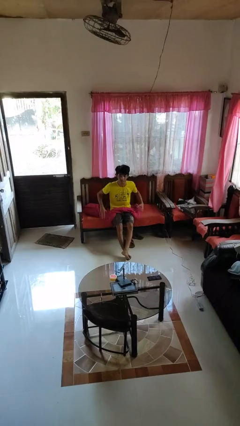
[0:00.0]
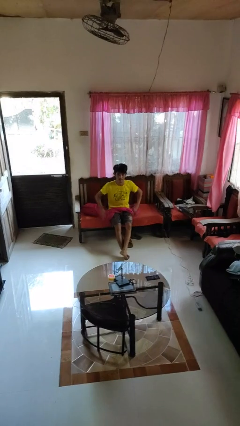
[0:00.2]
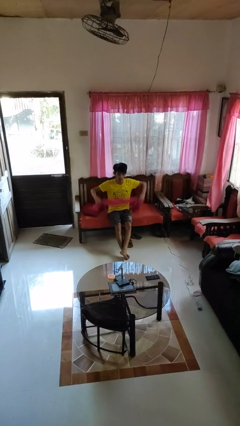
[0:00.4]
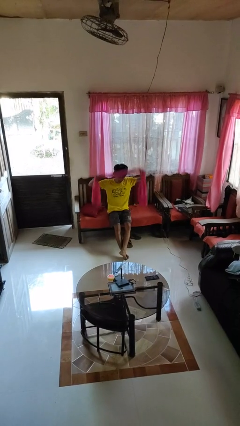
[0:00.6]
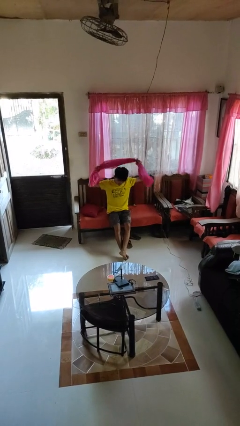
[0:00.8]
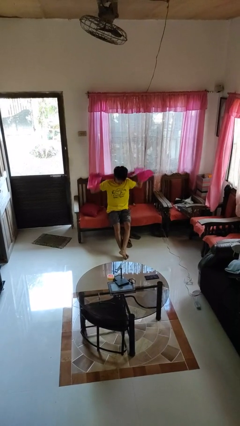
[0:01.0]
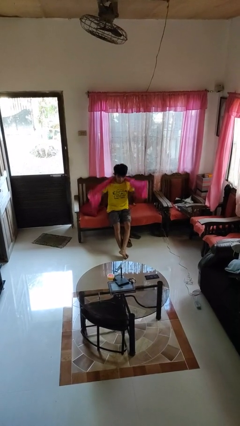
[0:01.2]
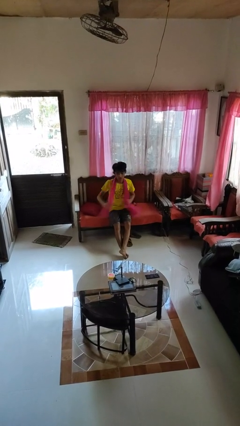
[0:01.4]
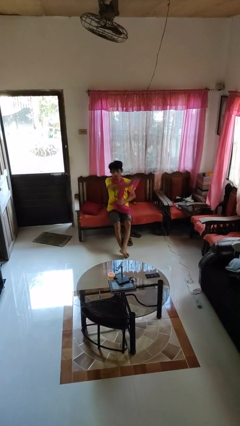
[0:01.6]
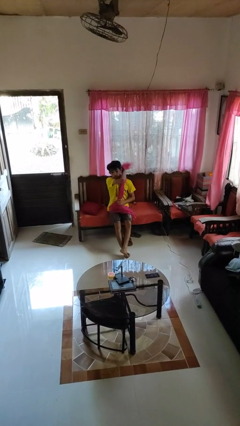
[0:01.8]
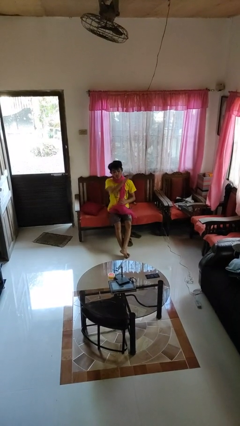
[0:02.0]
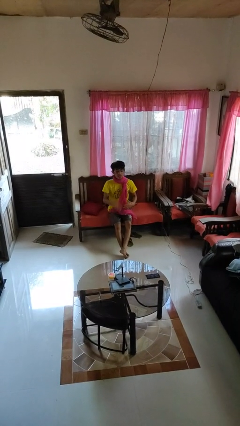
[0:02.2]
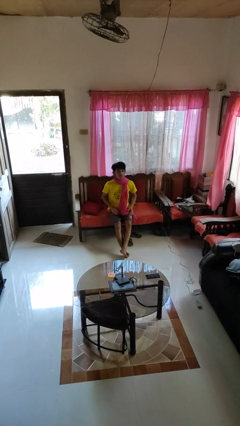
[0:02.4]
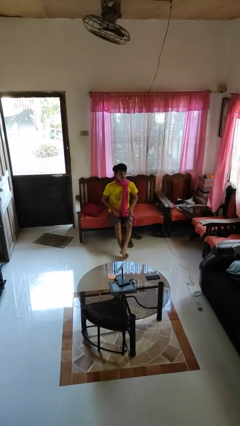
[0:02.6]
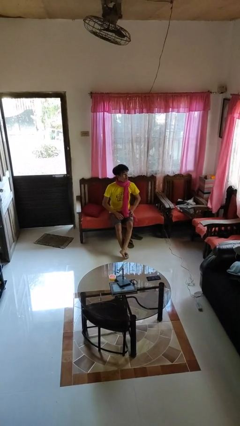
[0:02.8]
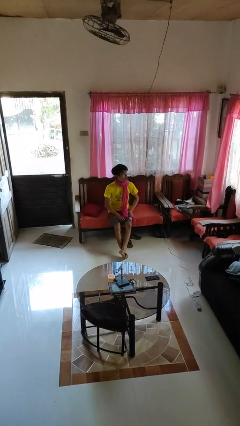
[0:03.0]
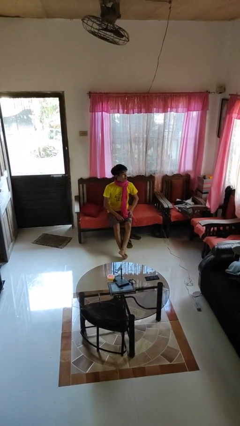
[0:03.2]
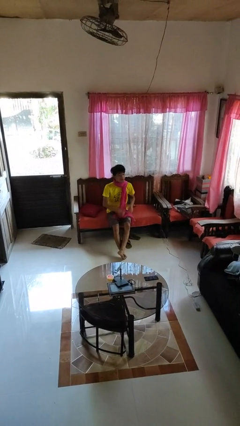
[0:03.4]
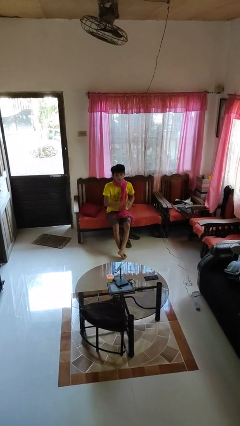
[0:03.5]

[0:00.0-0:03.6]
person puts on scarf

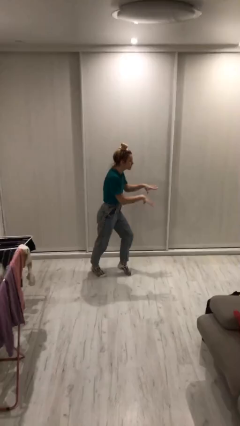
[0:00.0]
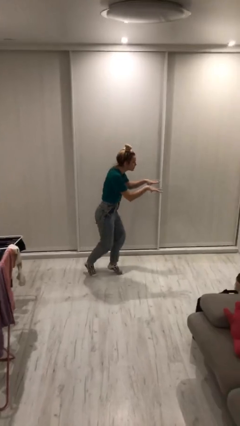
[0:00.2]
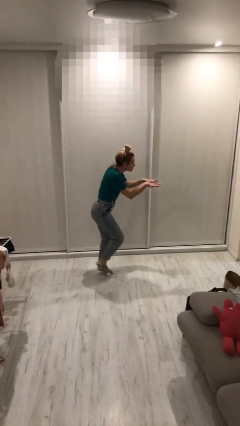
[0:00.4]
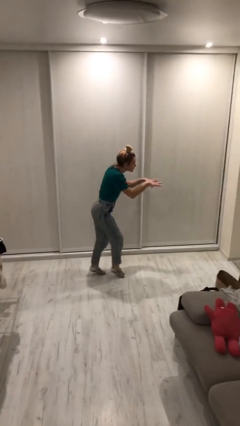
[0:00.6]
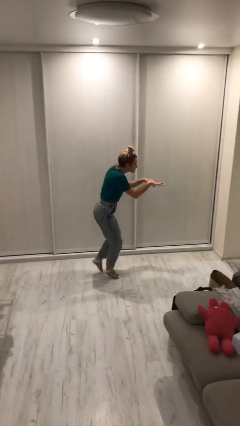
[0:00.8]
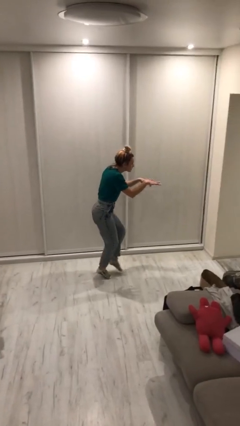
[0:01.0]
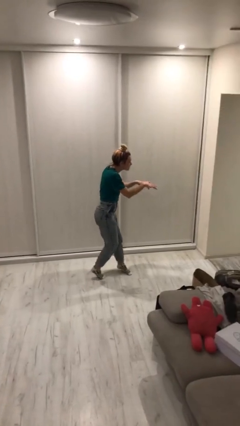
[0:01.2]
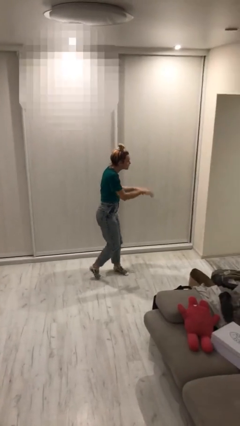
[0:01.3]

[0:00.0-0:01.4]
person walks tiptoe

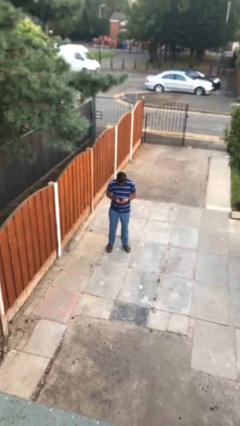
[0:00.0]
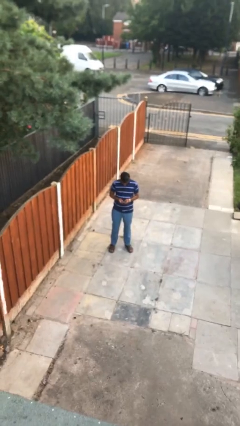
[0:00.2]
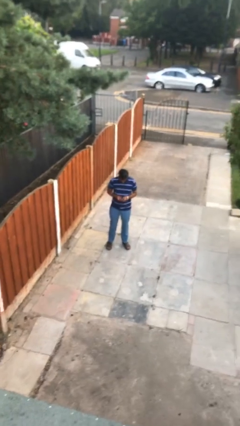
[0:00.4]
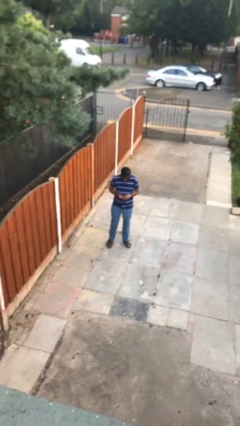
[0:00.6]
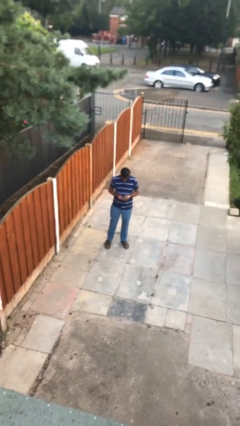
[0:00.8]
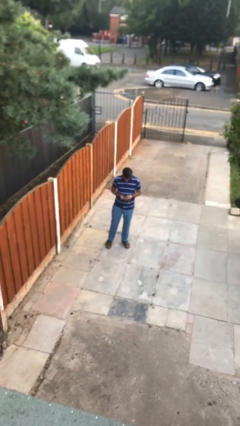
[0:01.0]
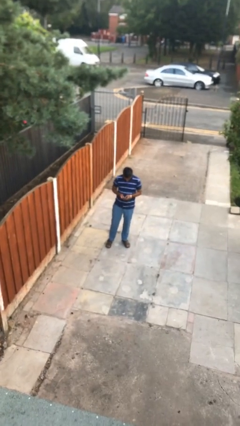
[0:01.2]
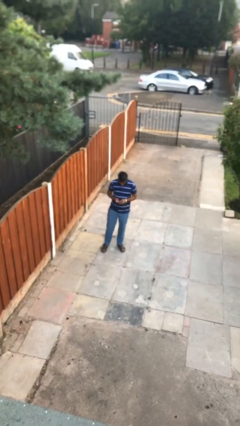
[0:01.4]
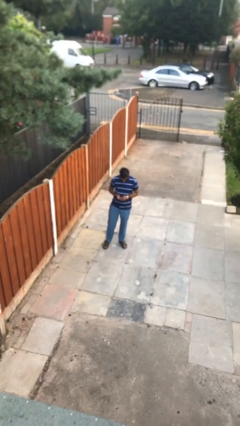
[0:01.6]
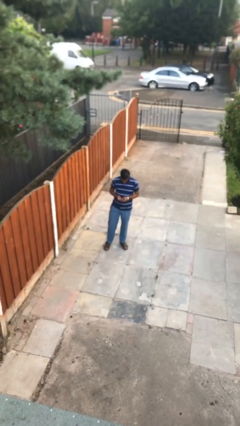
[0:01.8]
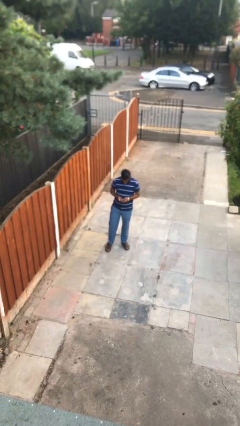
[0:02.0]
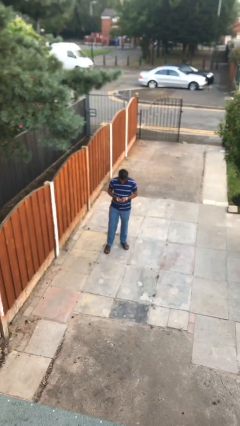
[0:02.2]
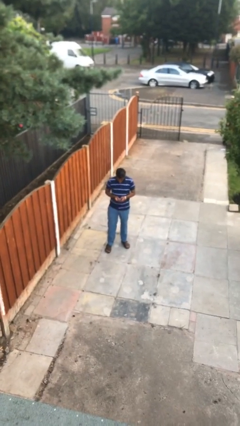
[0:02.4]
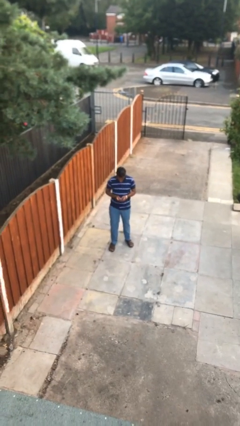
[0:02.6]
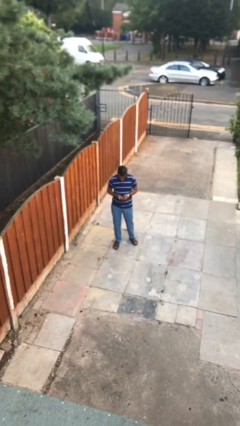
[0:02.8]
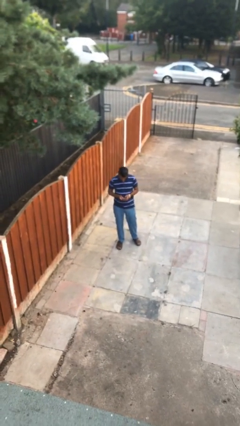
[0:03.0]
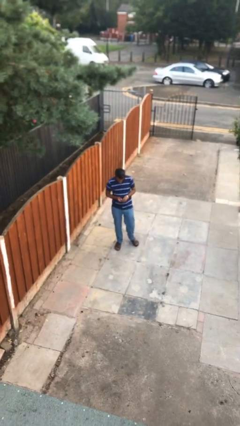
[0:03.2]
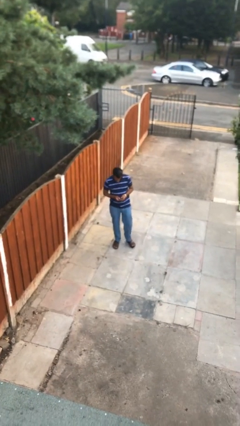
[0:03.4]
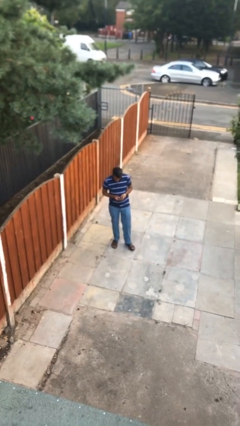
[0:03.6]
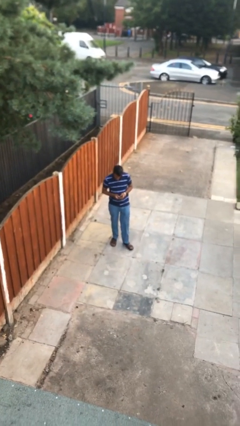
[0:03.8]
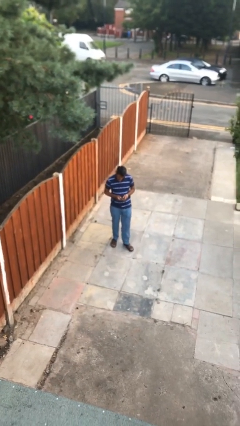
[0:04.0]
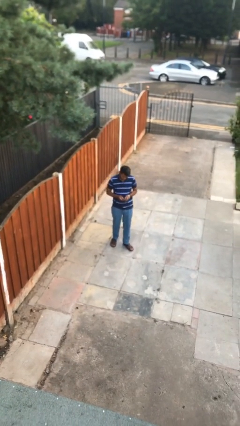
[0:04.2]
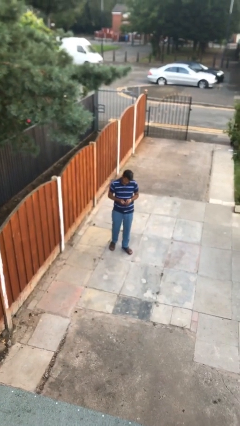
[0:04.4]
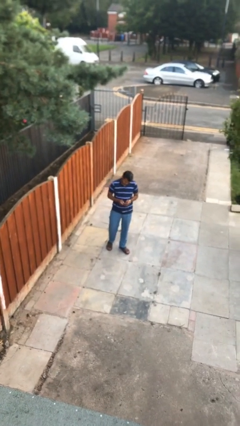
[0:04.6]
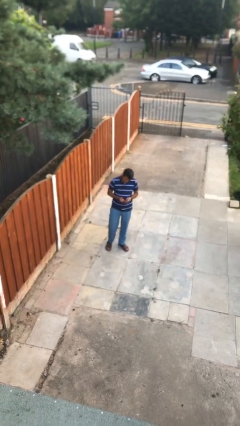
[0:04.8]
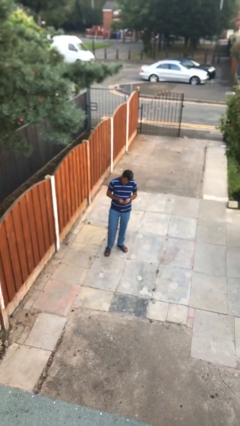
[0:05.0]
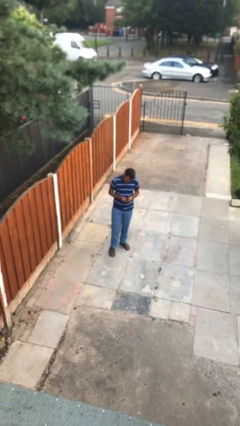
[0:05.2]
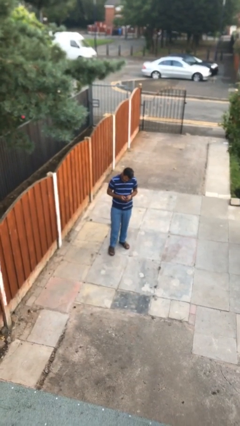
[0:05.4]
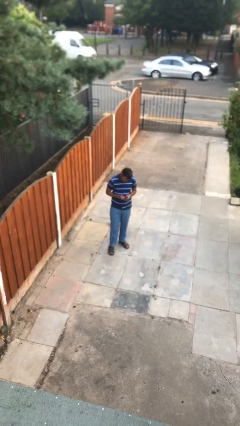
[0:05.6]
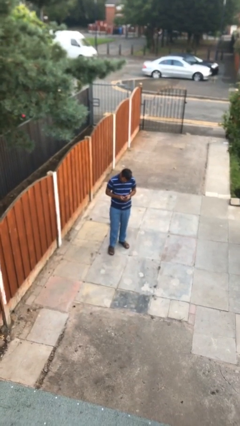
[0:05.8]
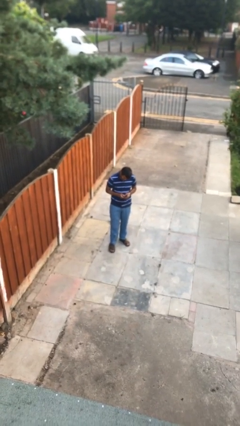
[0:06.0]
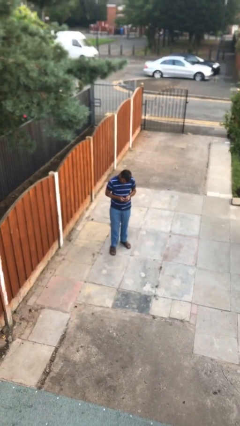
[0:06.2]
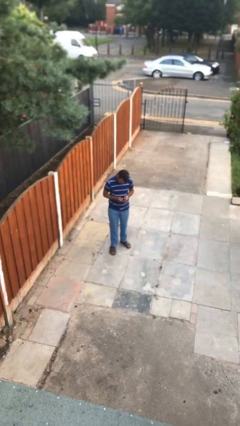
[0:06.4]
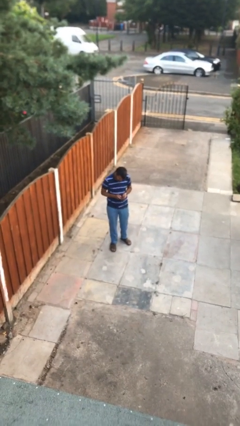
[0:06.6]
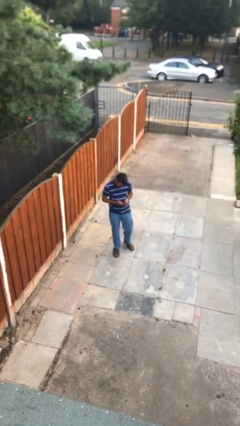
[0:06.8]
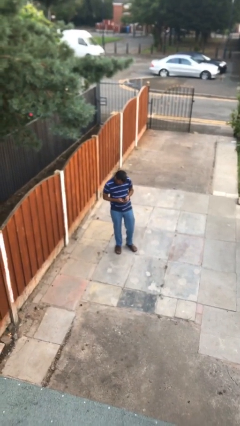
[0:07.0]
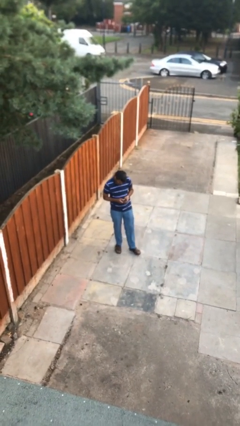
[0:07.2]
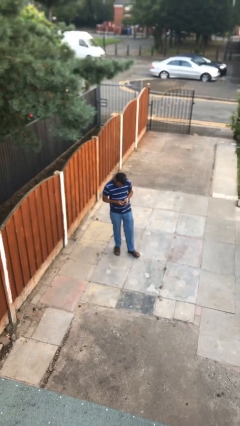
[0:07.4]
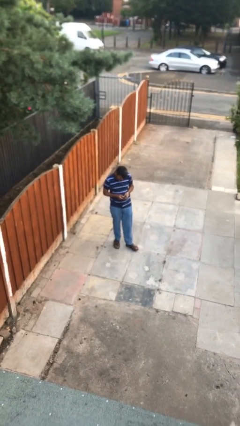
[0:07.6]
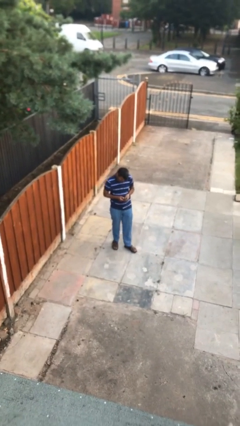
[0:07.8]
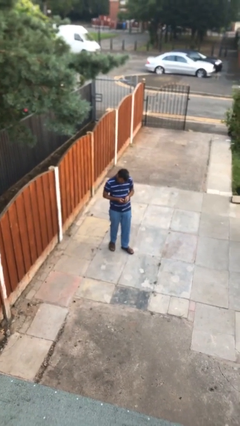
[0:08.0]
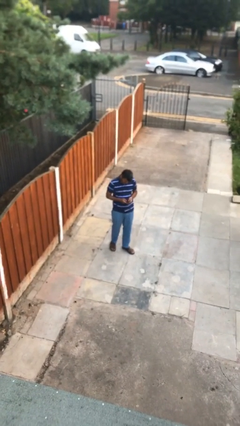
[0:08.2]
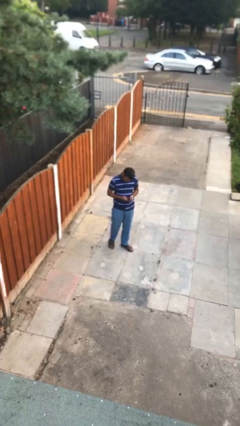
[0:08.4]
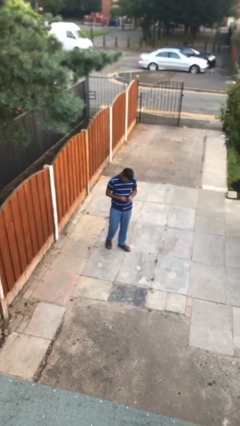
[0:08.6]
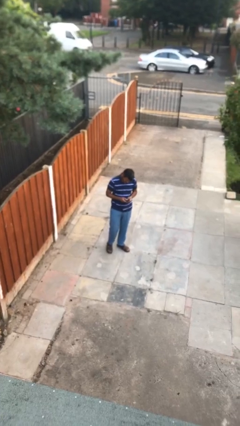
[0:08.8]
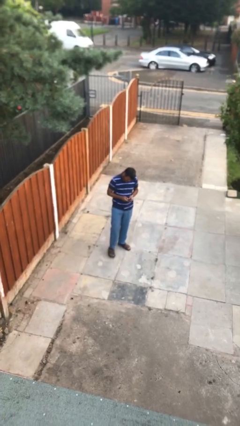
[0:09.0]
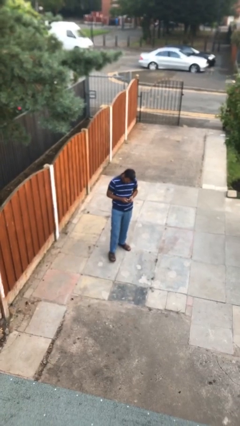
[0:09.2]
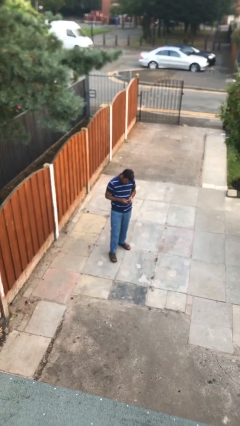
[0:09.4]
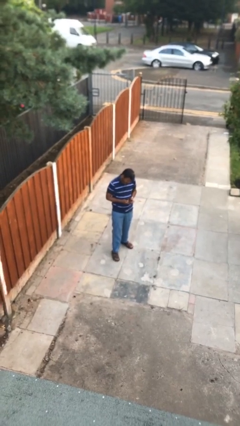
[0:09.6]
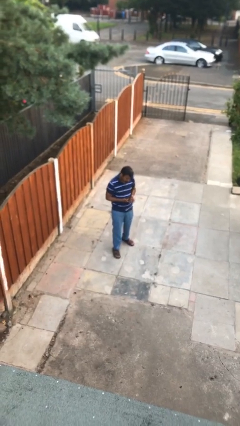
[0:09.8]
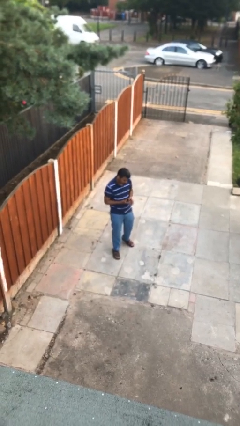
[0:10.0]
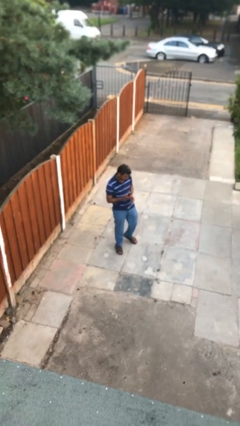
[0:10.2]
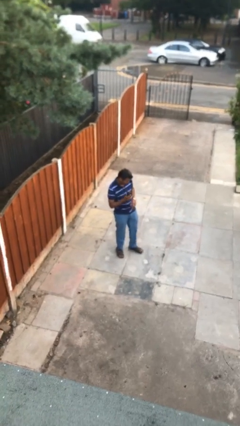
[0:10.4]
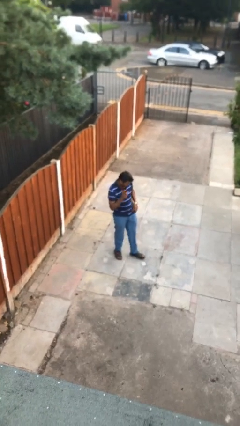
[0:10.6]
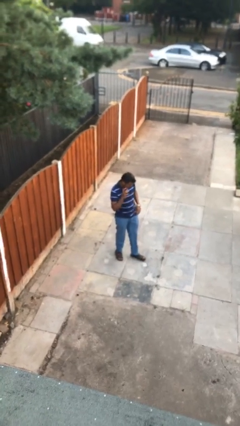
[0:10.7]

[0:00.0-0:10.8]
person texts on phone

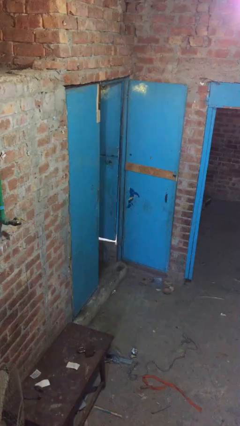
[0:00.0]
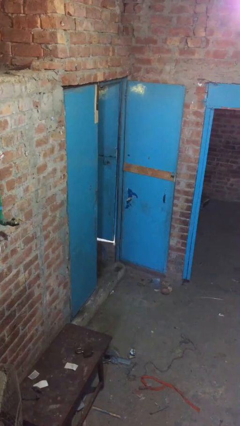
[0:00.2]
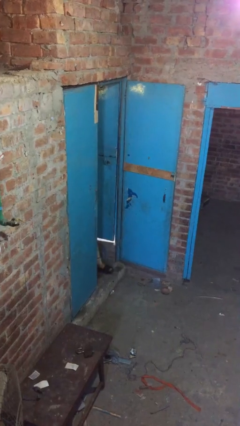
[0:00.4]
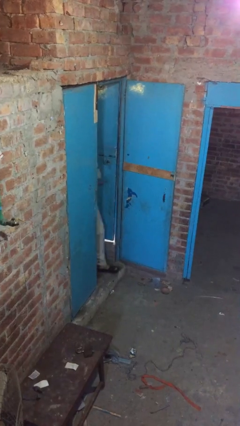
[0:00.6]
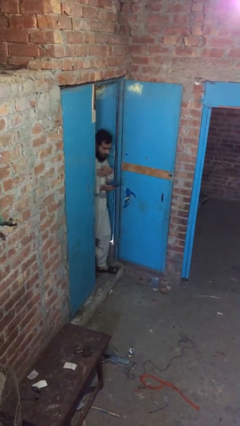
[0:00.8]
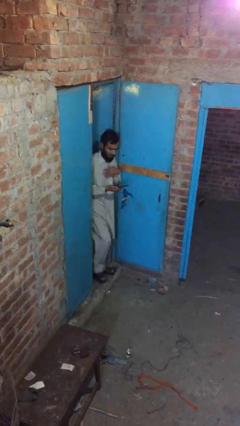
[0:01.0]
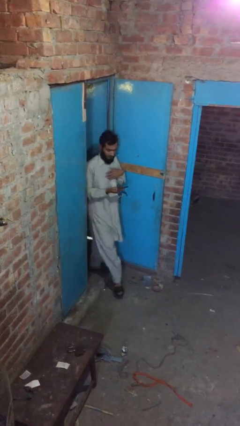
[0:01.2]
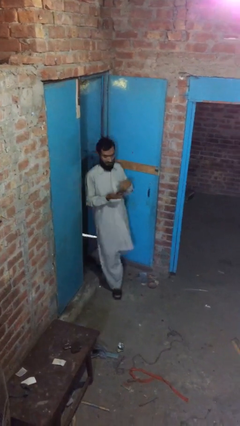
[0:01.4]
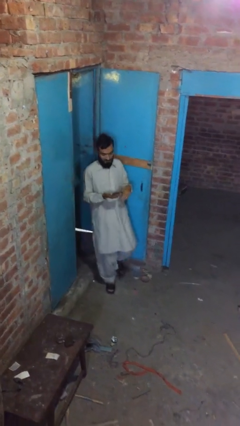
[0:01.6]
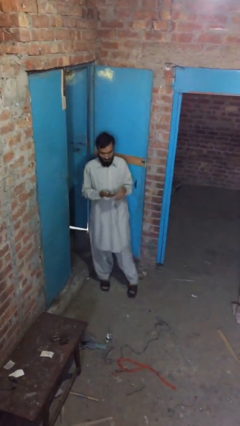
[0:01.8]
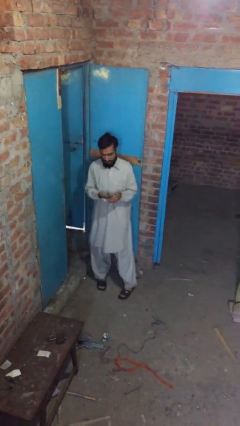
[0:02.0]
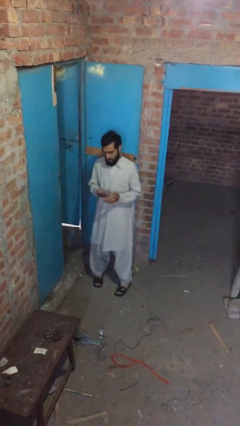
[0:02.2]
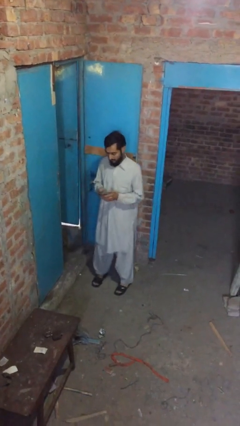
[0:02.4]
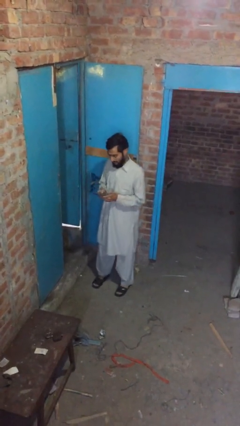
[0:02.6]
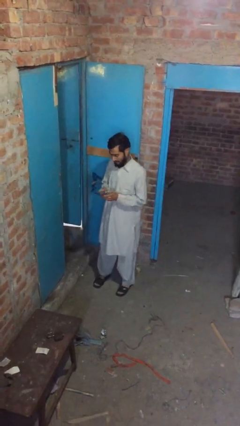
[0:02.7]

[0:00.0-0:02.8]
person enters scene through structure
